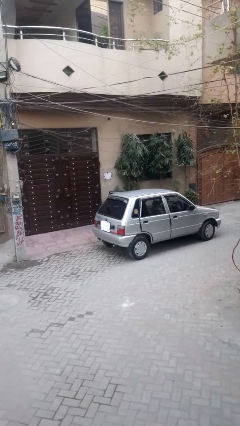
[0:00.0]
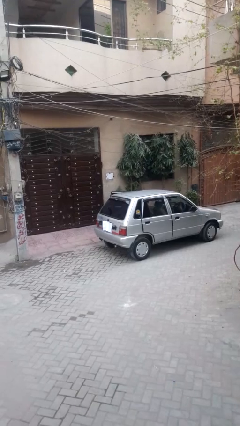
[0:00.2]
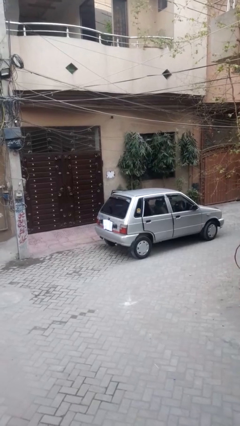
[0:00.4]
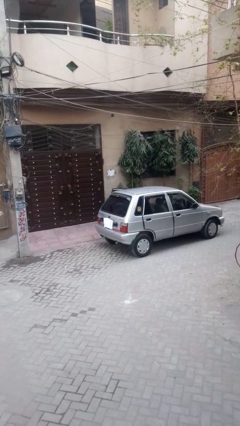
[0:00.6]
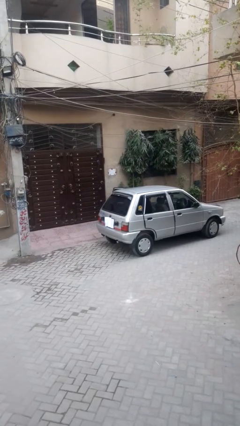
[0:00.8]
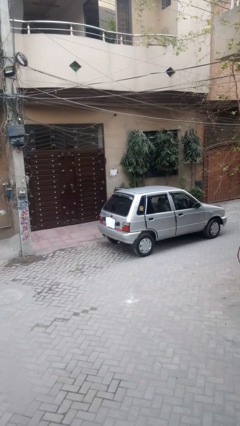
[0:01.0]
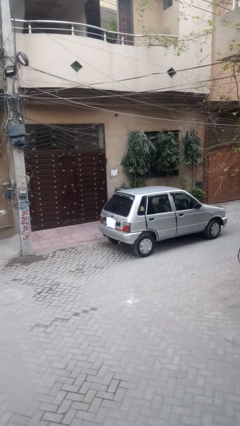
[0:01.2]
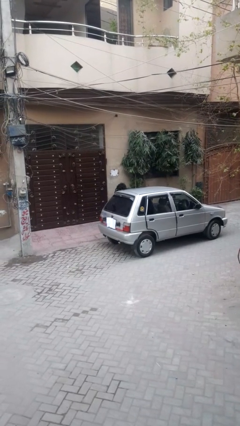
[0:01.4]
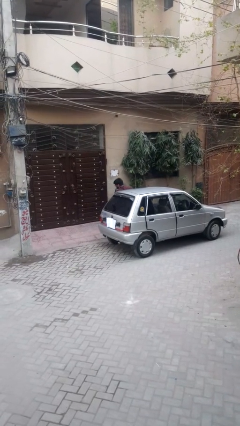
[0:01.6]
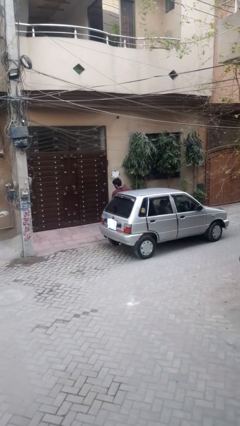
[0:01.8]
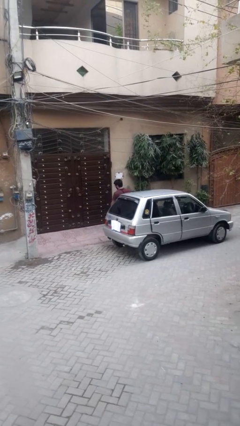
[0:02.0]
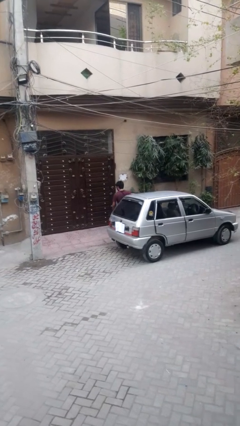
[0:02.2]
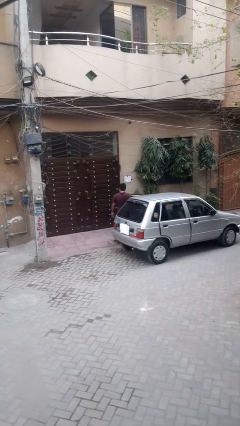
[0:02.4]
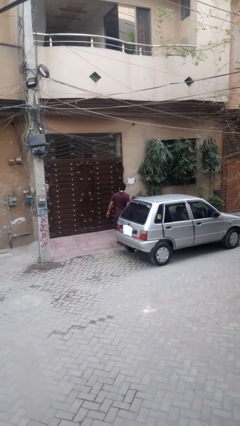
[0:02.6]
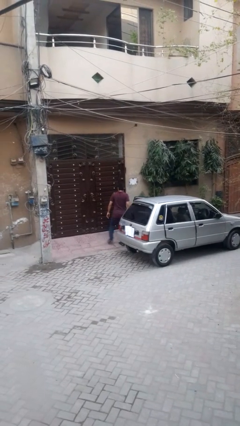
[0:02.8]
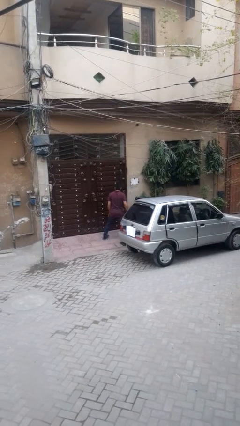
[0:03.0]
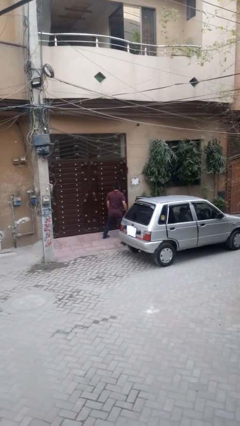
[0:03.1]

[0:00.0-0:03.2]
person exits car

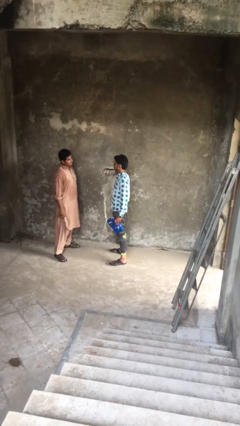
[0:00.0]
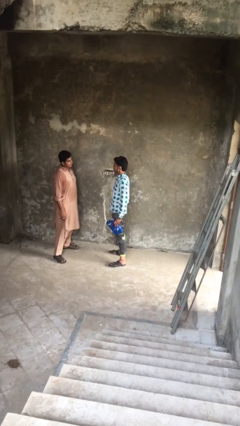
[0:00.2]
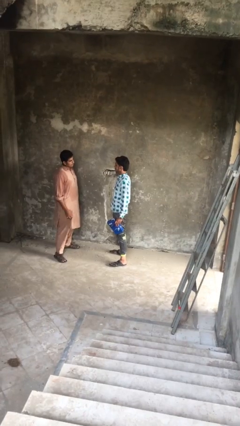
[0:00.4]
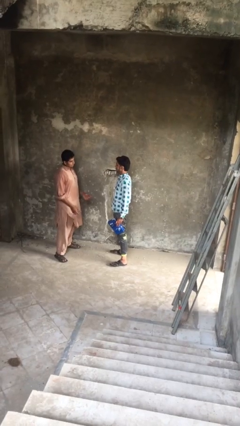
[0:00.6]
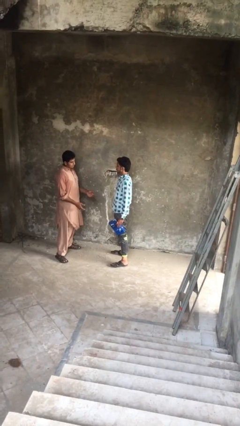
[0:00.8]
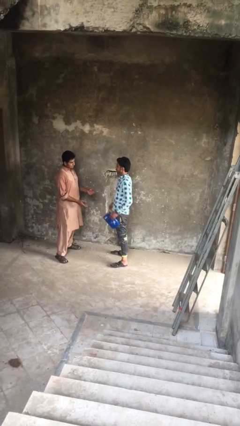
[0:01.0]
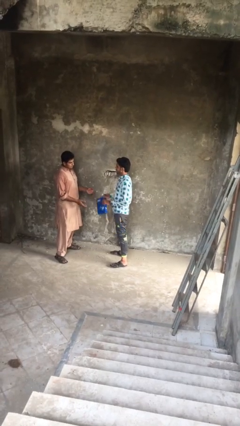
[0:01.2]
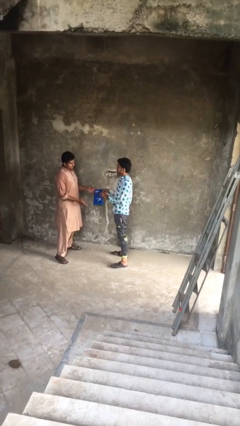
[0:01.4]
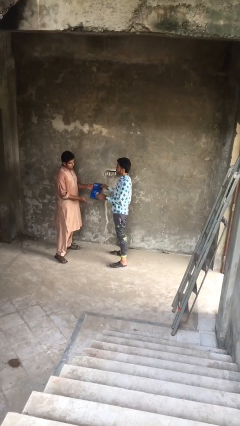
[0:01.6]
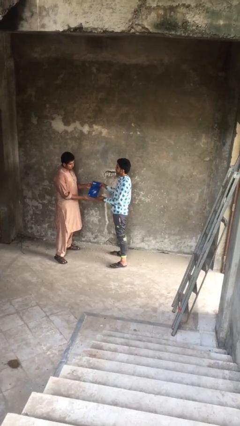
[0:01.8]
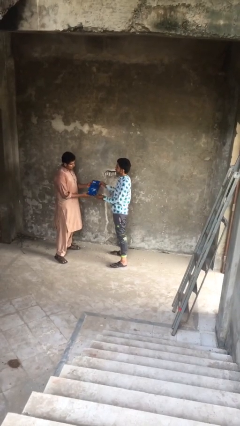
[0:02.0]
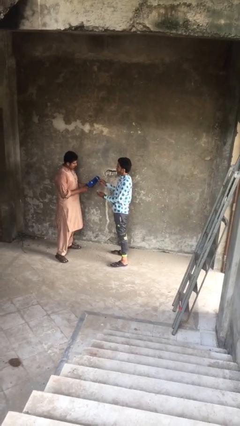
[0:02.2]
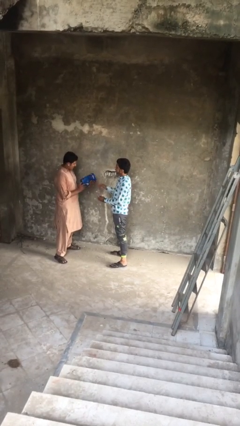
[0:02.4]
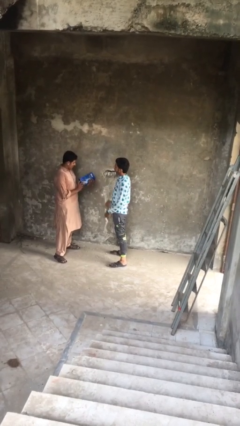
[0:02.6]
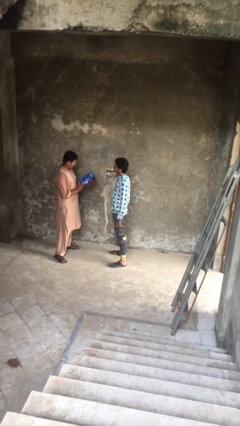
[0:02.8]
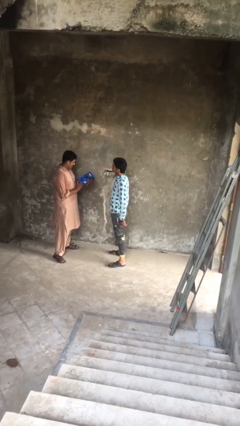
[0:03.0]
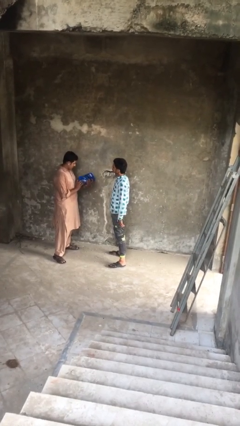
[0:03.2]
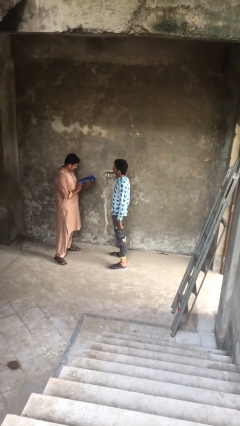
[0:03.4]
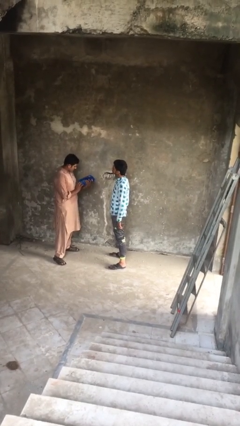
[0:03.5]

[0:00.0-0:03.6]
person transfers object to person

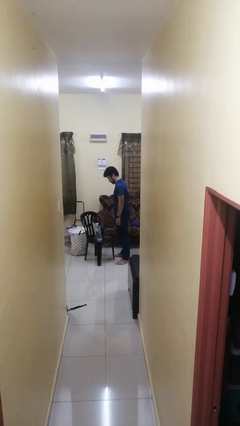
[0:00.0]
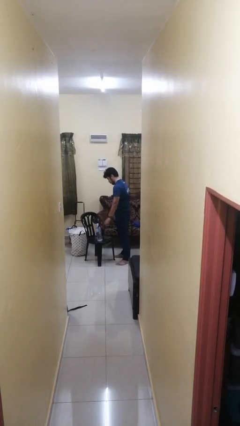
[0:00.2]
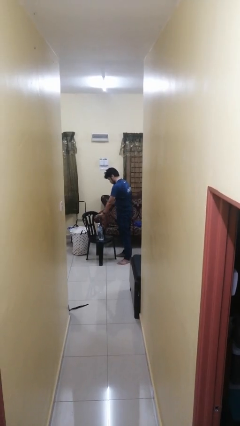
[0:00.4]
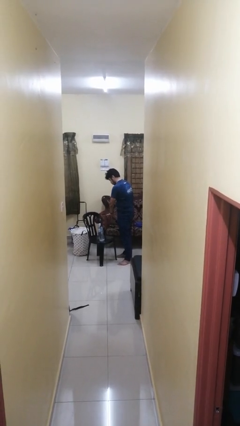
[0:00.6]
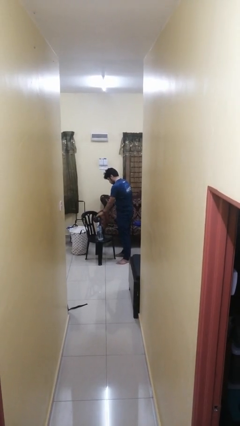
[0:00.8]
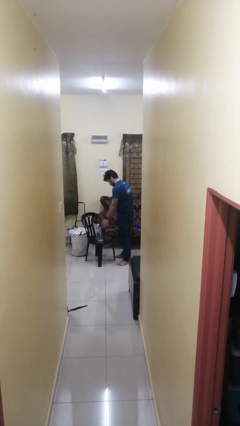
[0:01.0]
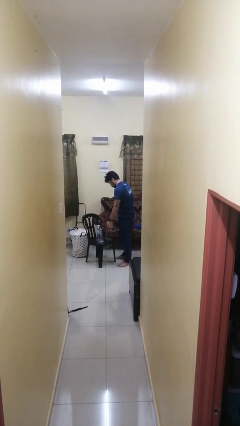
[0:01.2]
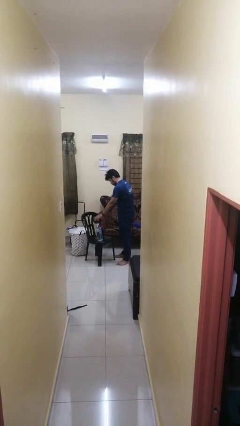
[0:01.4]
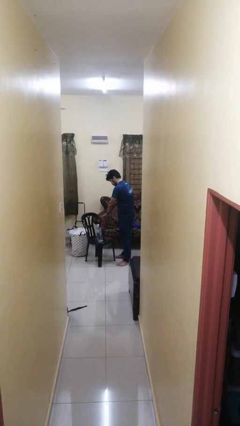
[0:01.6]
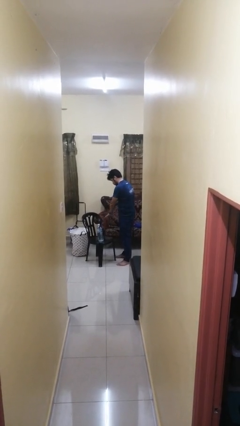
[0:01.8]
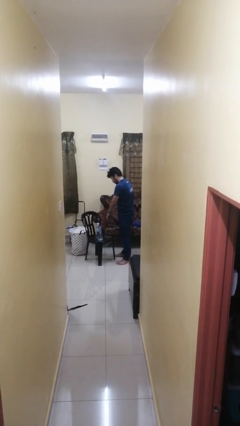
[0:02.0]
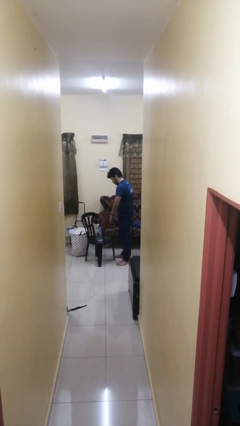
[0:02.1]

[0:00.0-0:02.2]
person waves hand over object

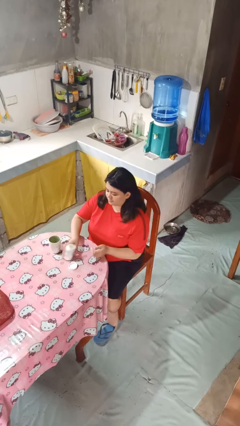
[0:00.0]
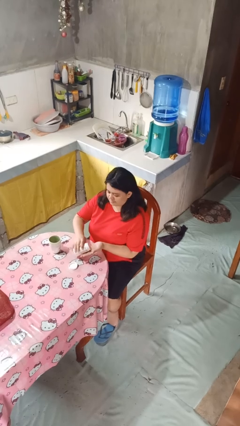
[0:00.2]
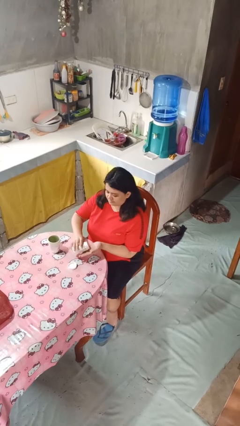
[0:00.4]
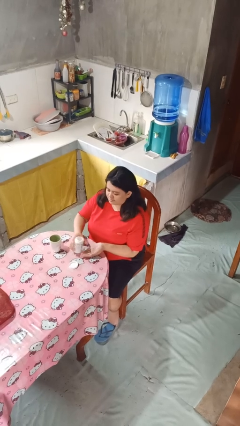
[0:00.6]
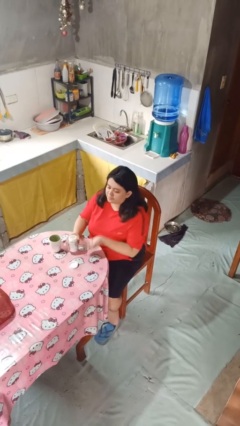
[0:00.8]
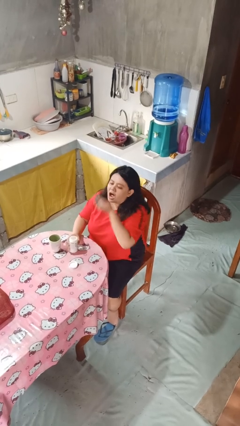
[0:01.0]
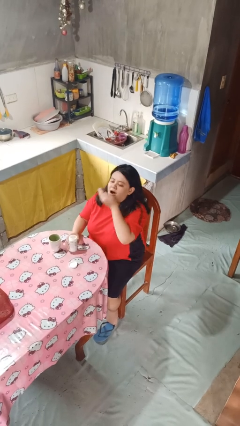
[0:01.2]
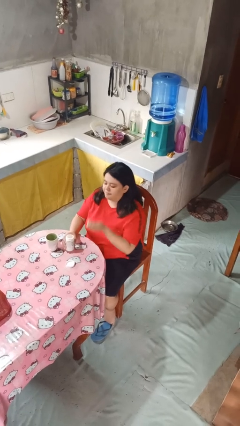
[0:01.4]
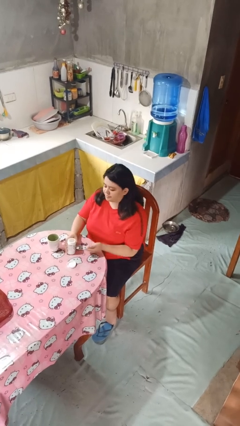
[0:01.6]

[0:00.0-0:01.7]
person takes medicine pills

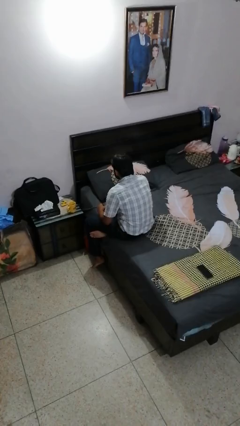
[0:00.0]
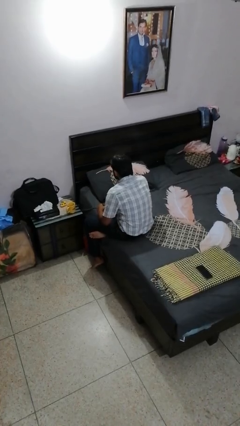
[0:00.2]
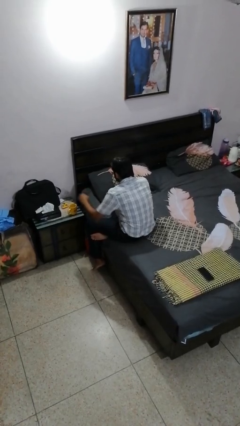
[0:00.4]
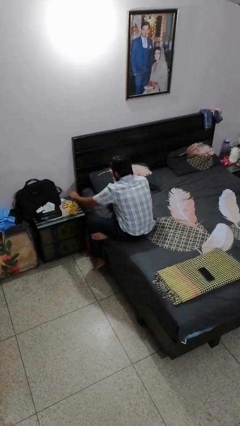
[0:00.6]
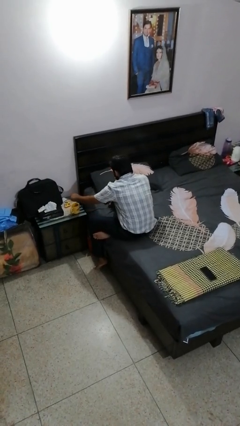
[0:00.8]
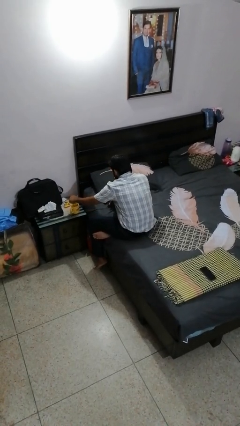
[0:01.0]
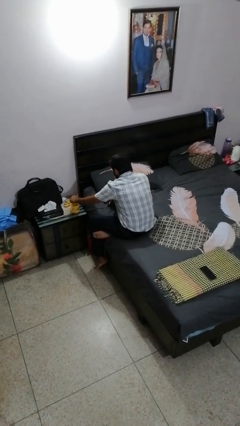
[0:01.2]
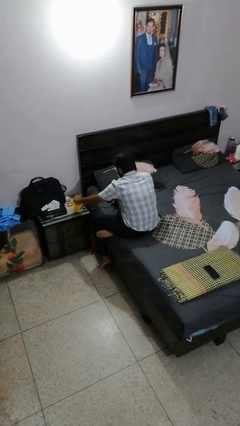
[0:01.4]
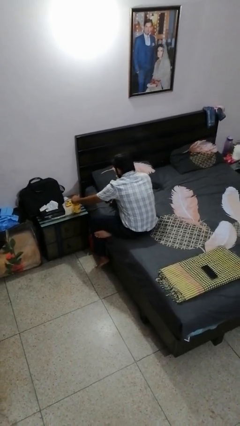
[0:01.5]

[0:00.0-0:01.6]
person stirs mug

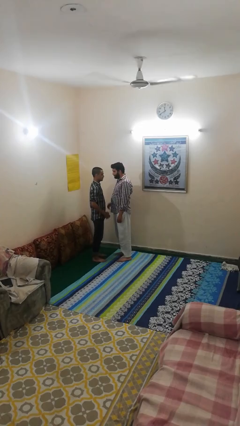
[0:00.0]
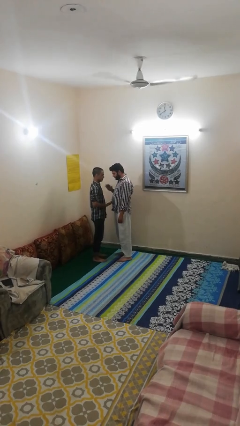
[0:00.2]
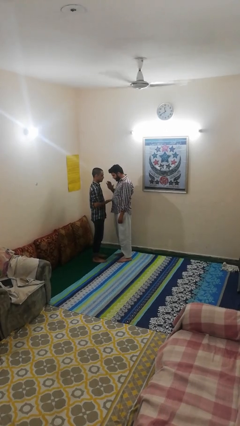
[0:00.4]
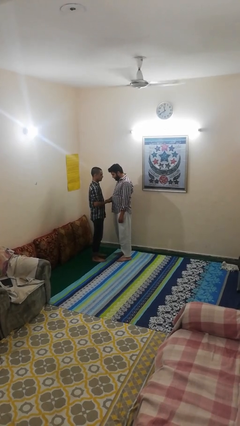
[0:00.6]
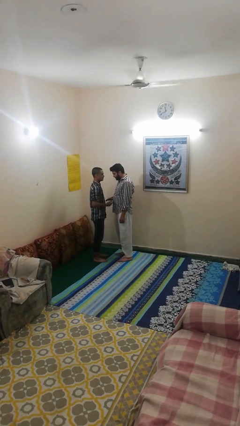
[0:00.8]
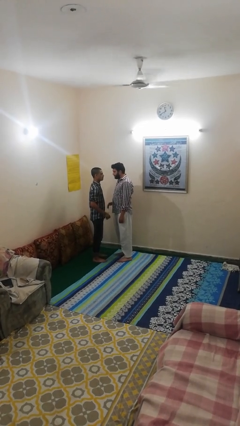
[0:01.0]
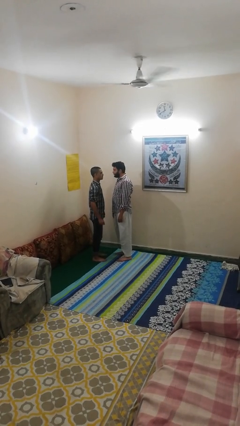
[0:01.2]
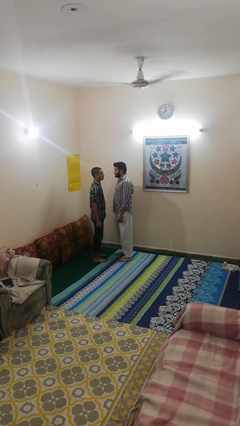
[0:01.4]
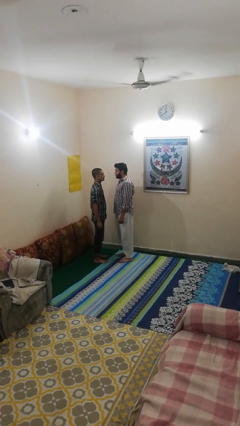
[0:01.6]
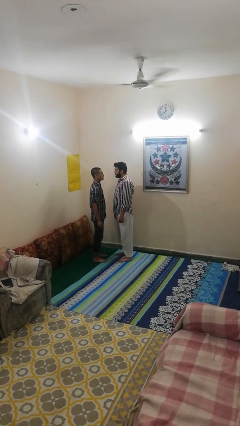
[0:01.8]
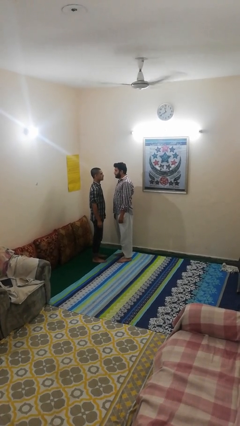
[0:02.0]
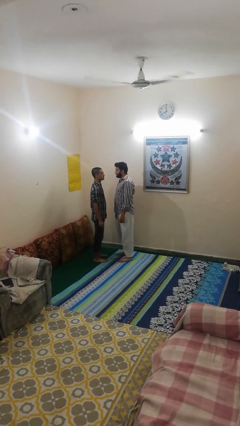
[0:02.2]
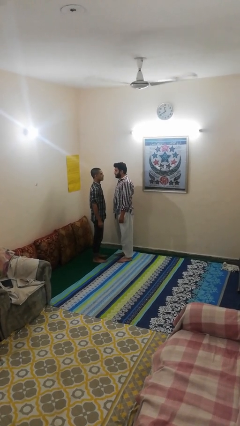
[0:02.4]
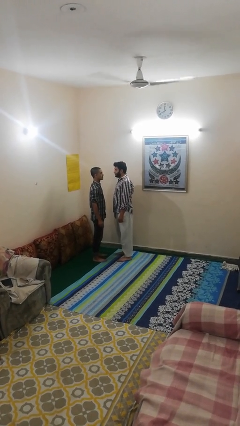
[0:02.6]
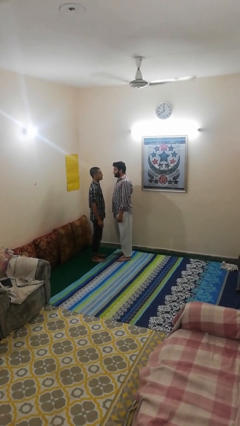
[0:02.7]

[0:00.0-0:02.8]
person highfives hand

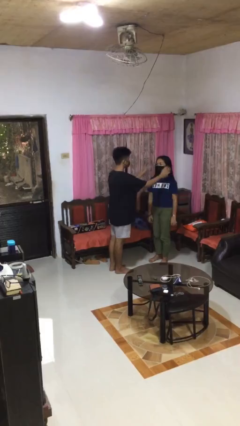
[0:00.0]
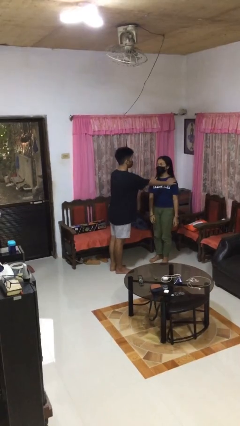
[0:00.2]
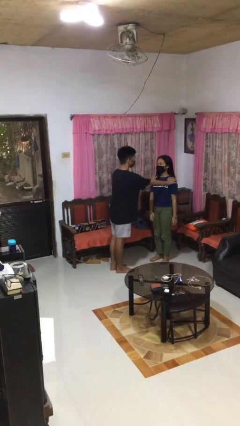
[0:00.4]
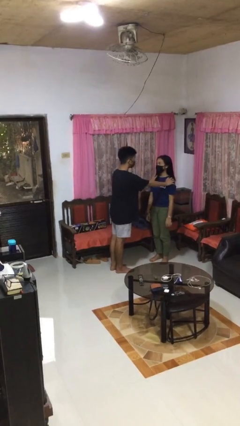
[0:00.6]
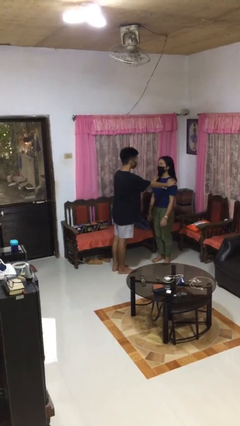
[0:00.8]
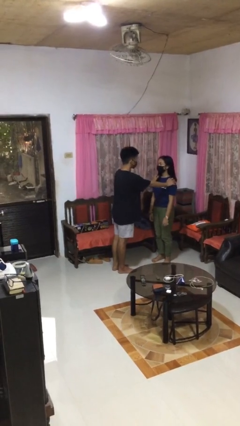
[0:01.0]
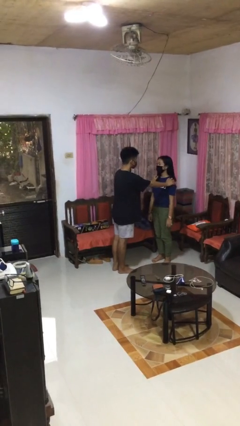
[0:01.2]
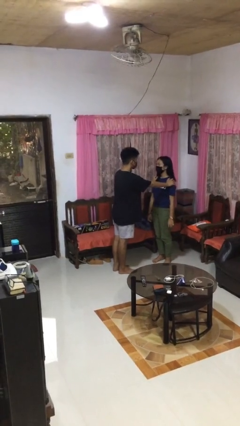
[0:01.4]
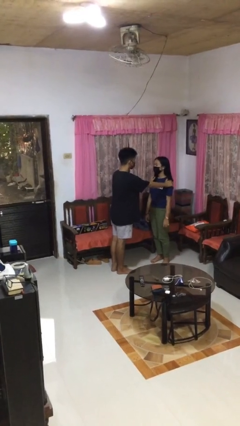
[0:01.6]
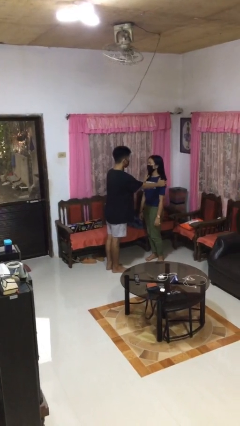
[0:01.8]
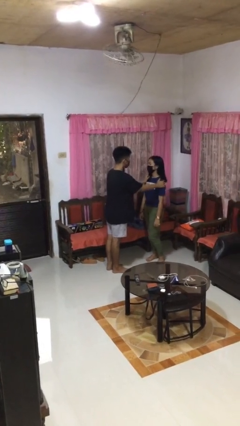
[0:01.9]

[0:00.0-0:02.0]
person grabs person by shoulder
